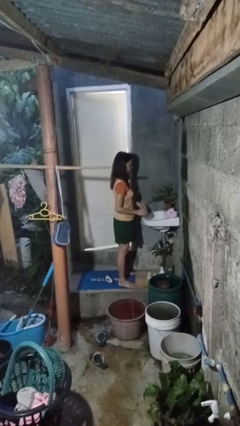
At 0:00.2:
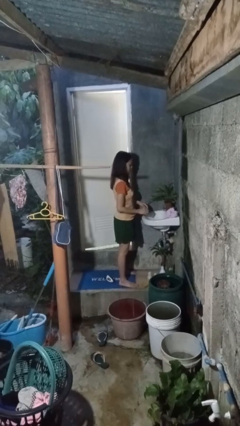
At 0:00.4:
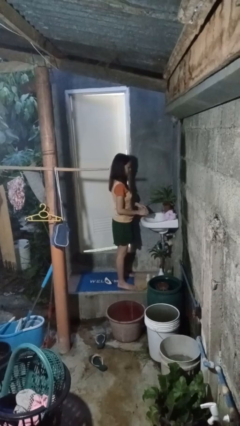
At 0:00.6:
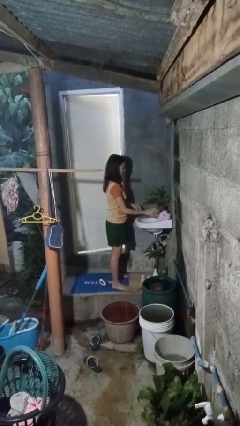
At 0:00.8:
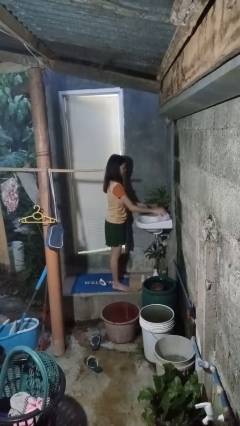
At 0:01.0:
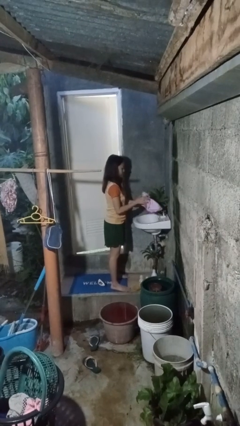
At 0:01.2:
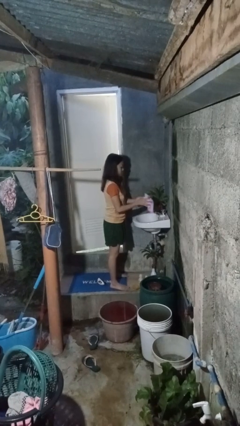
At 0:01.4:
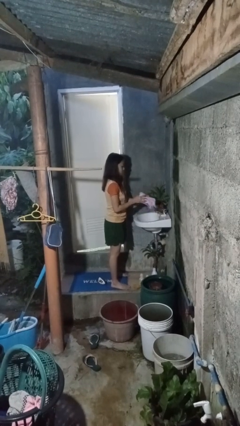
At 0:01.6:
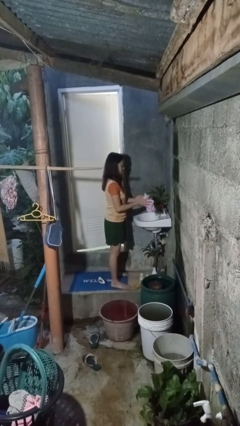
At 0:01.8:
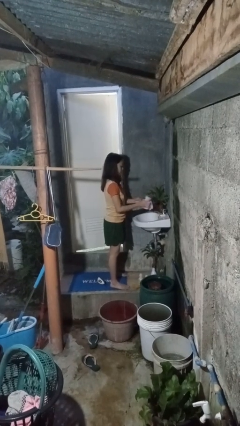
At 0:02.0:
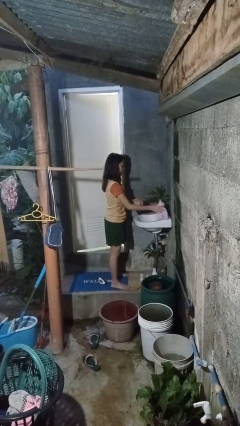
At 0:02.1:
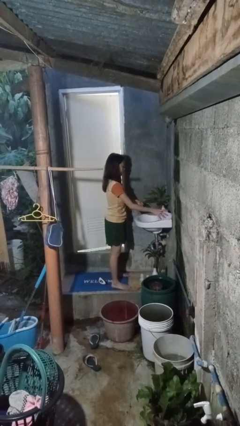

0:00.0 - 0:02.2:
person dries hands with towel

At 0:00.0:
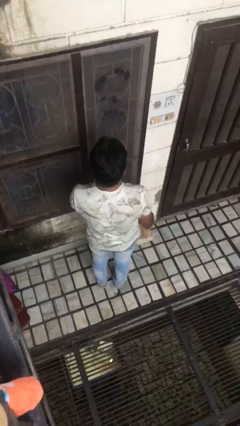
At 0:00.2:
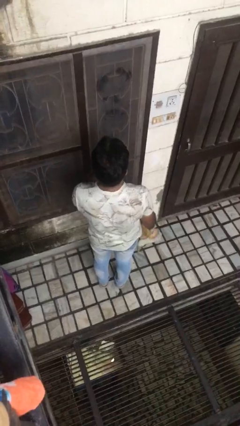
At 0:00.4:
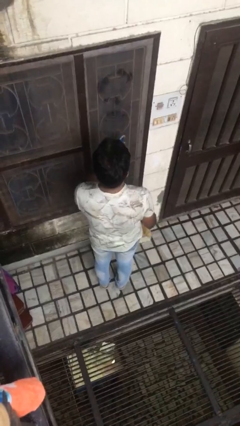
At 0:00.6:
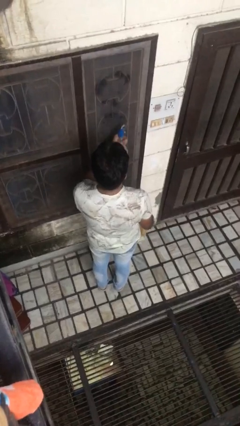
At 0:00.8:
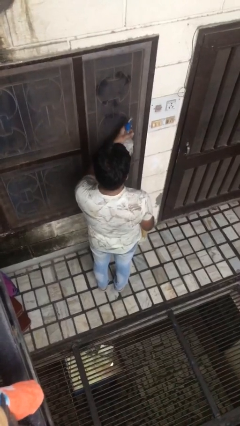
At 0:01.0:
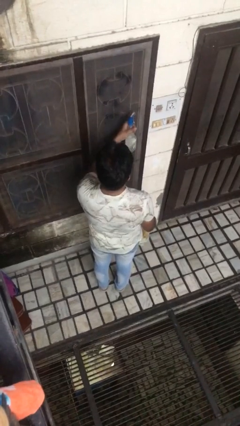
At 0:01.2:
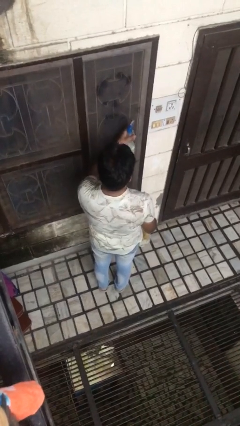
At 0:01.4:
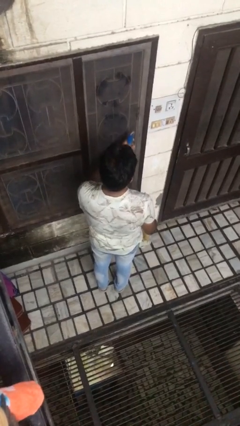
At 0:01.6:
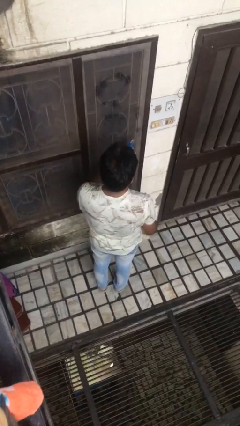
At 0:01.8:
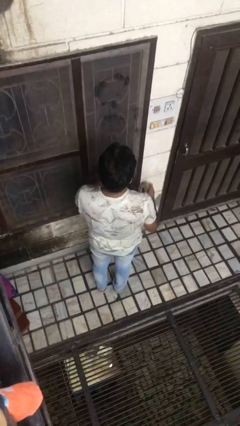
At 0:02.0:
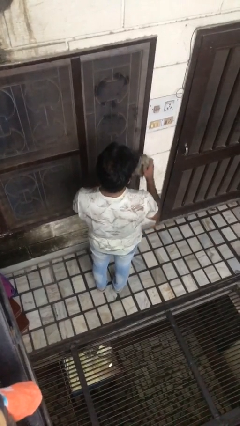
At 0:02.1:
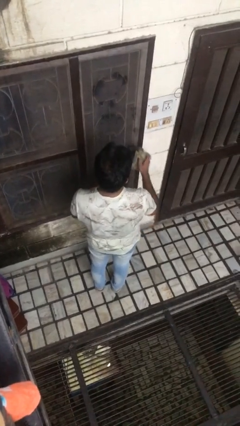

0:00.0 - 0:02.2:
person sprays from bottle

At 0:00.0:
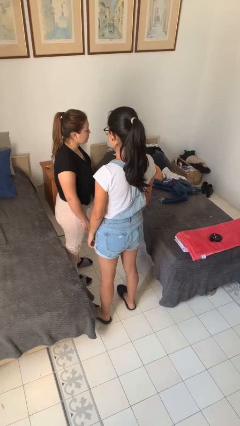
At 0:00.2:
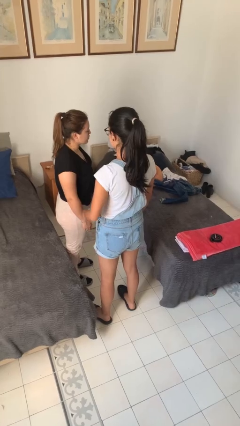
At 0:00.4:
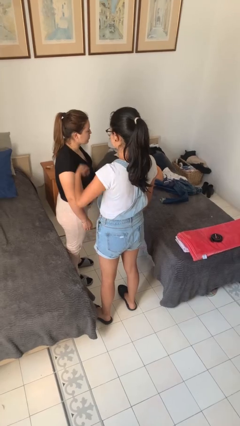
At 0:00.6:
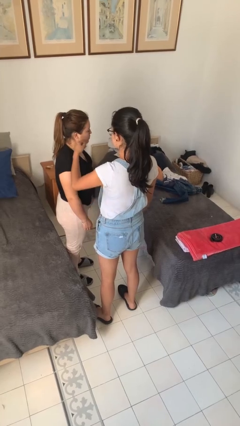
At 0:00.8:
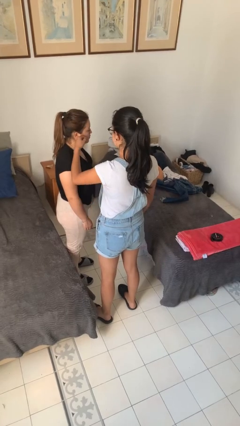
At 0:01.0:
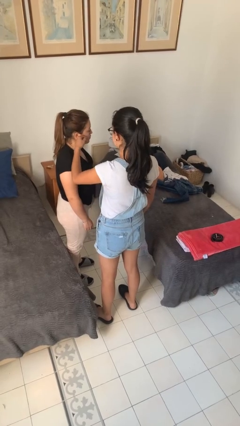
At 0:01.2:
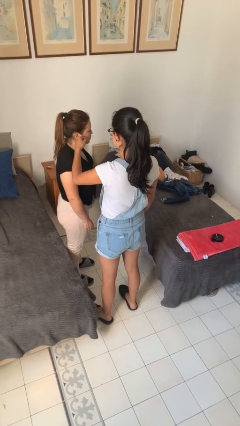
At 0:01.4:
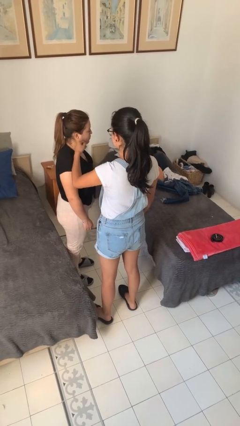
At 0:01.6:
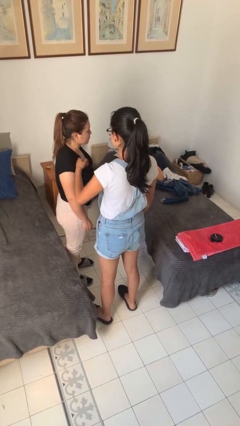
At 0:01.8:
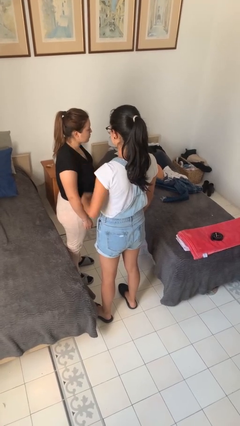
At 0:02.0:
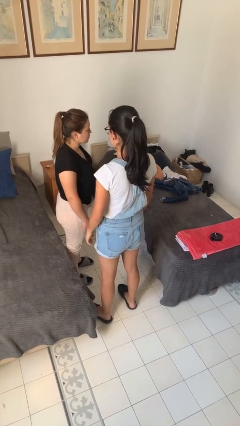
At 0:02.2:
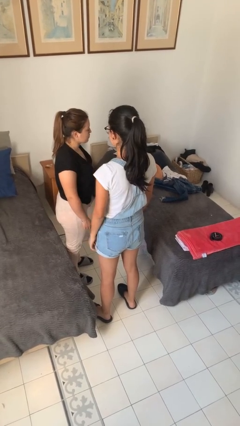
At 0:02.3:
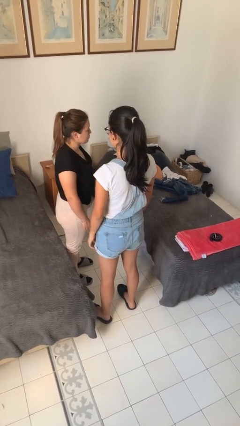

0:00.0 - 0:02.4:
person touches face of person

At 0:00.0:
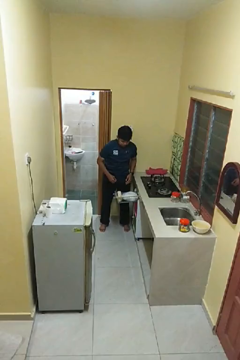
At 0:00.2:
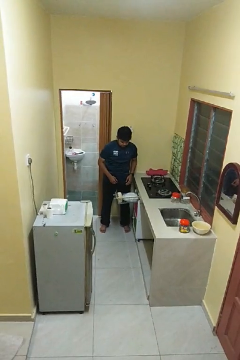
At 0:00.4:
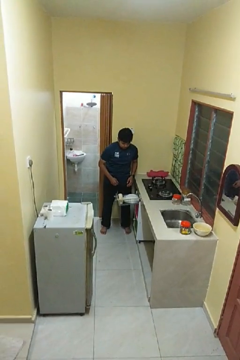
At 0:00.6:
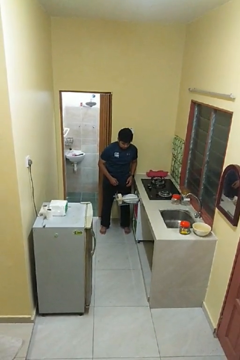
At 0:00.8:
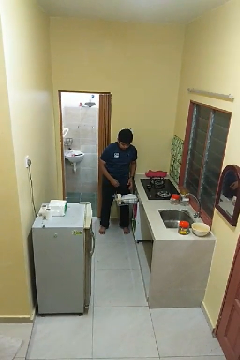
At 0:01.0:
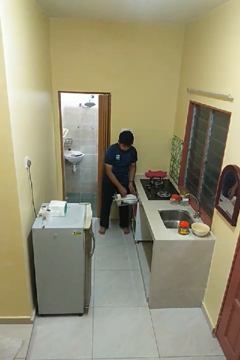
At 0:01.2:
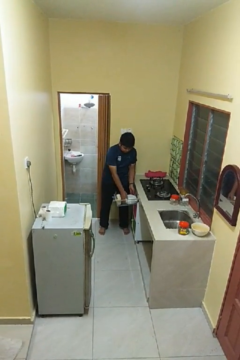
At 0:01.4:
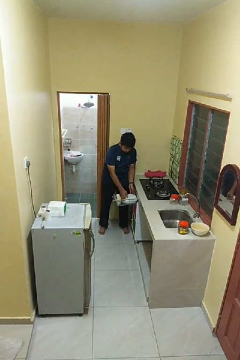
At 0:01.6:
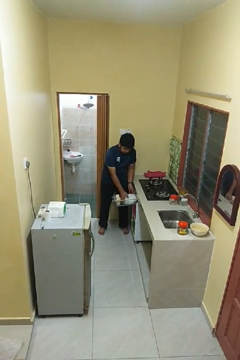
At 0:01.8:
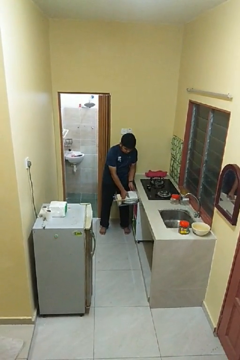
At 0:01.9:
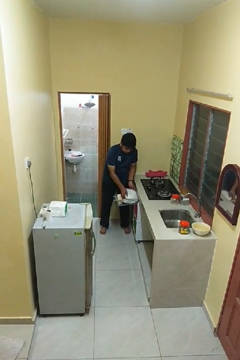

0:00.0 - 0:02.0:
person takes object from kitchen drawer

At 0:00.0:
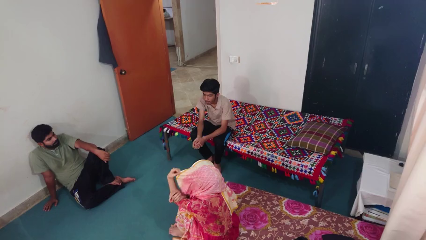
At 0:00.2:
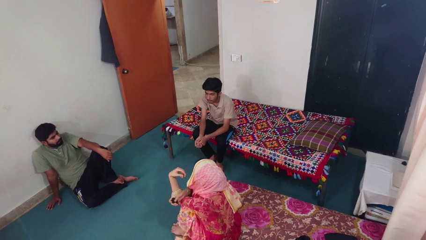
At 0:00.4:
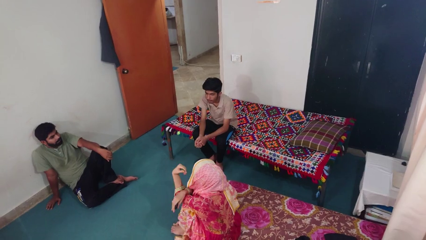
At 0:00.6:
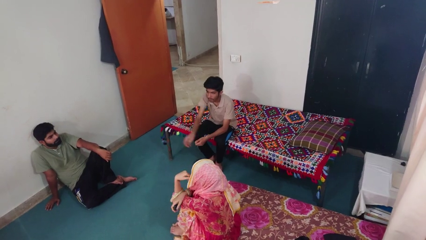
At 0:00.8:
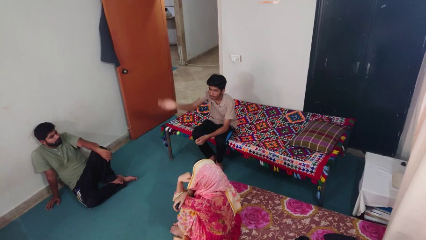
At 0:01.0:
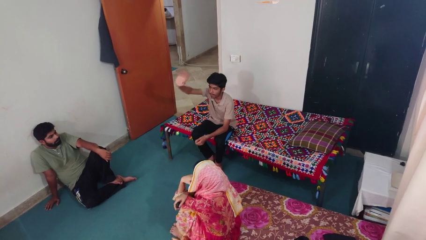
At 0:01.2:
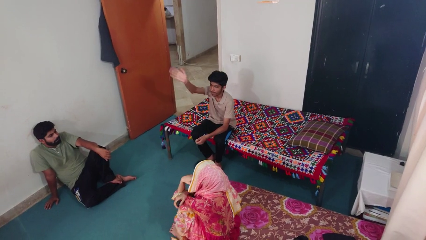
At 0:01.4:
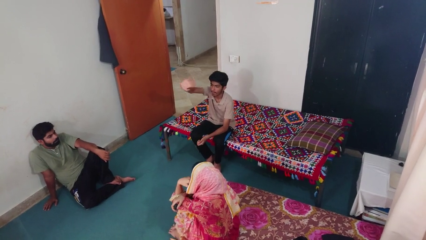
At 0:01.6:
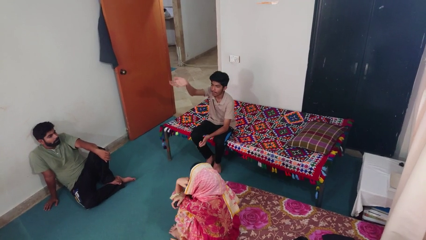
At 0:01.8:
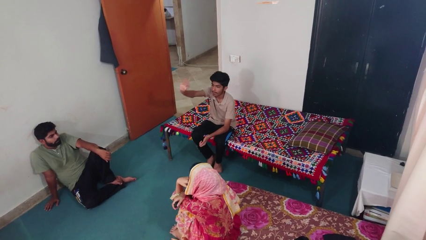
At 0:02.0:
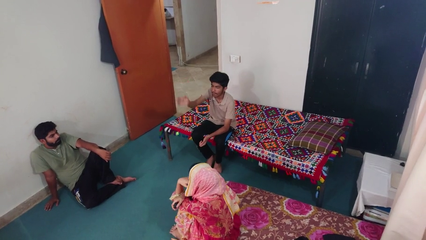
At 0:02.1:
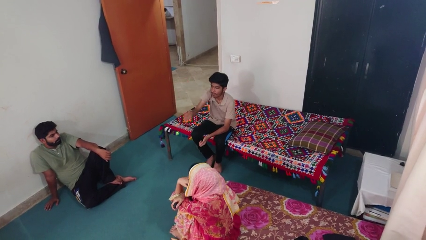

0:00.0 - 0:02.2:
person waves at person

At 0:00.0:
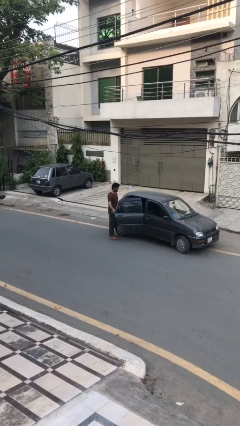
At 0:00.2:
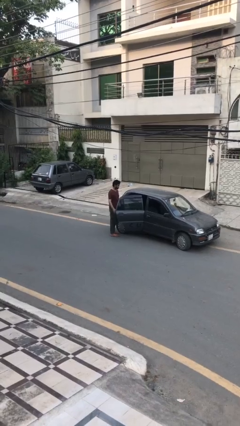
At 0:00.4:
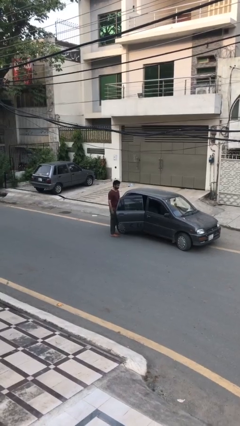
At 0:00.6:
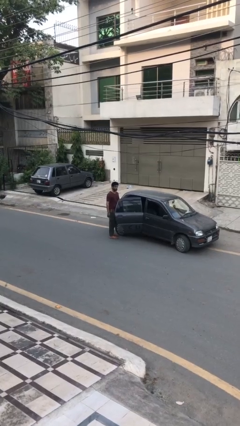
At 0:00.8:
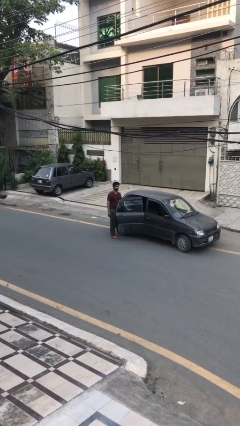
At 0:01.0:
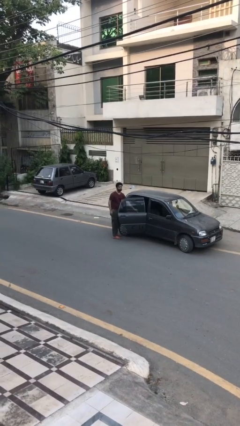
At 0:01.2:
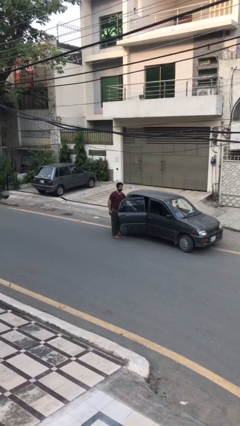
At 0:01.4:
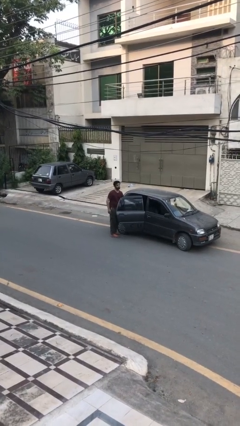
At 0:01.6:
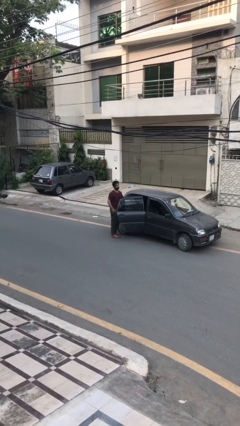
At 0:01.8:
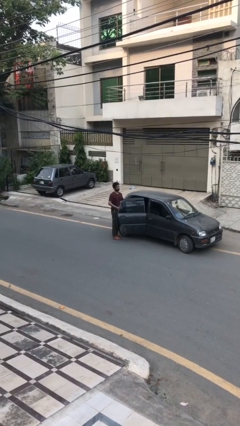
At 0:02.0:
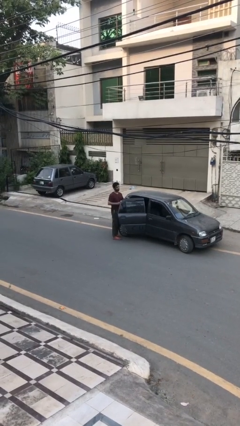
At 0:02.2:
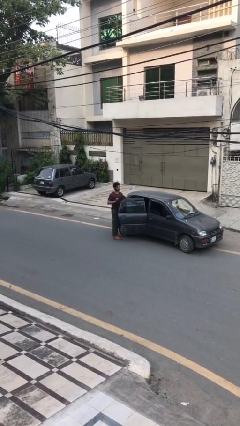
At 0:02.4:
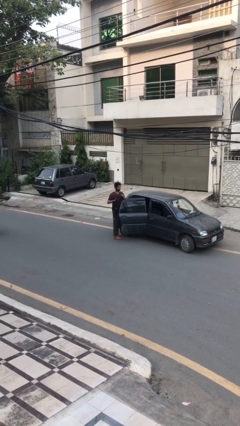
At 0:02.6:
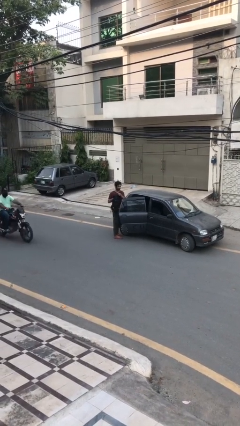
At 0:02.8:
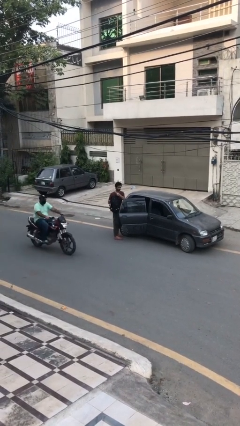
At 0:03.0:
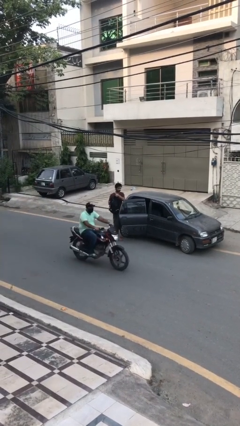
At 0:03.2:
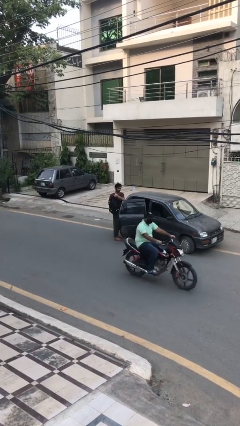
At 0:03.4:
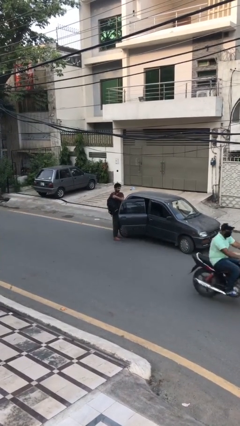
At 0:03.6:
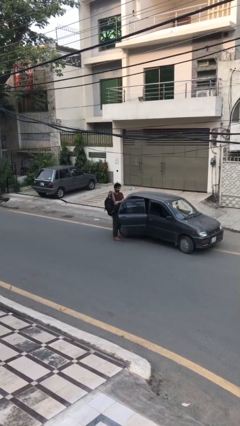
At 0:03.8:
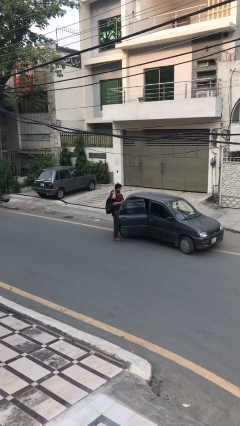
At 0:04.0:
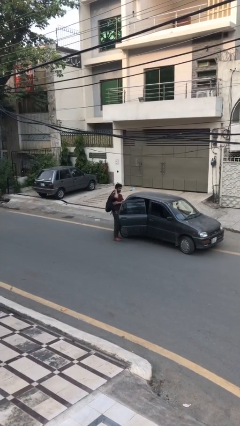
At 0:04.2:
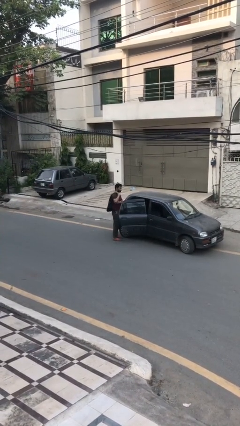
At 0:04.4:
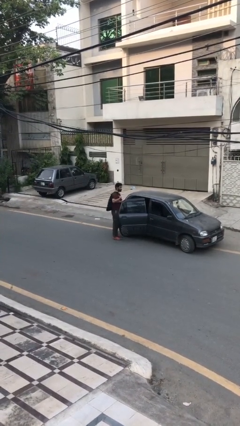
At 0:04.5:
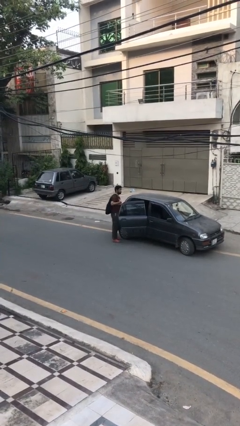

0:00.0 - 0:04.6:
person unloads car

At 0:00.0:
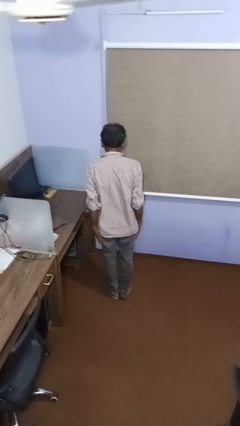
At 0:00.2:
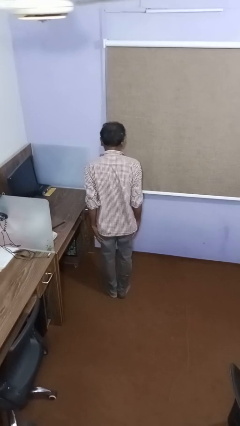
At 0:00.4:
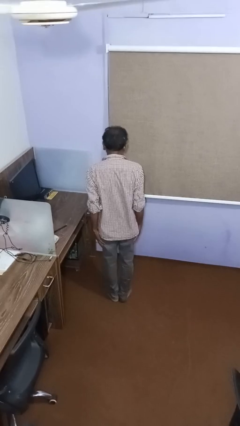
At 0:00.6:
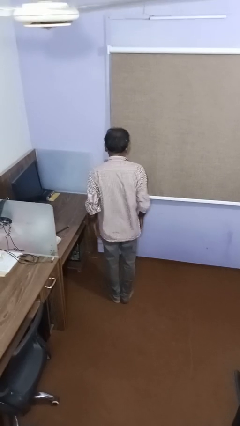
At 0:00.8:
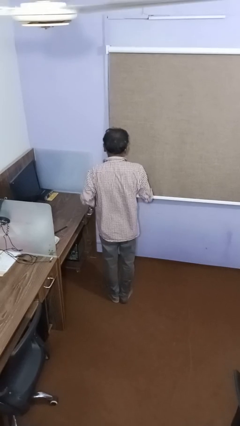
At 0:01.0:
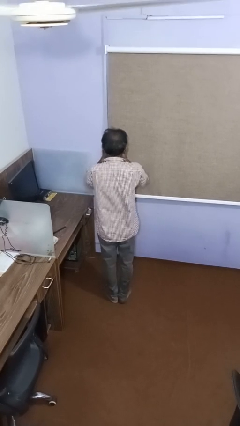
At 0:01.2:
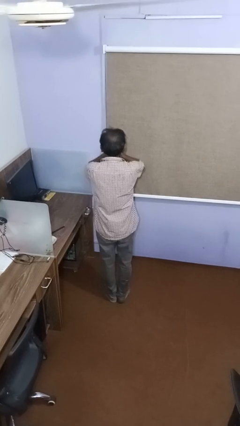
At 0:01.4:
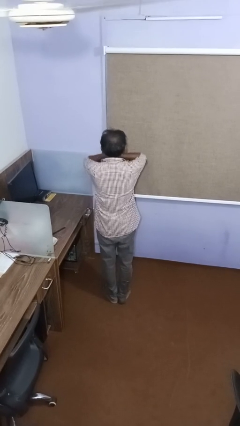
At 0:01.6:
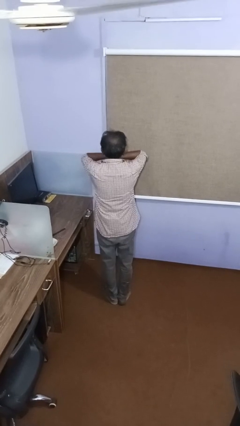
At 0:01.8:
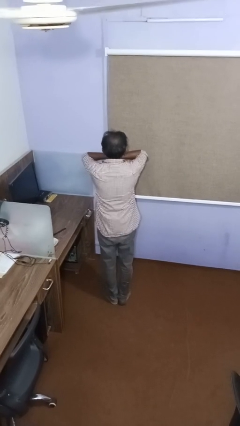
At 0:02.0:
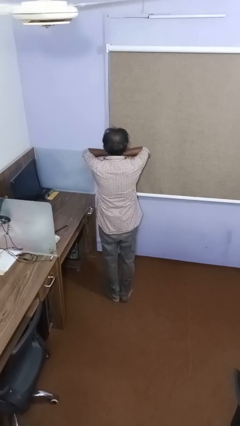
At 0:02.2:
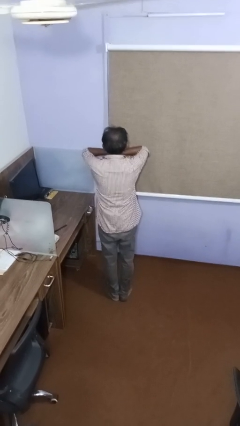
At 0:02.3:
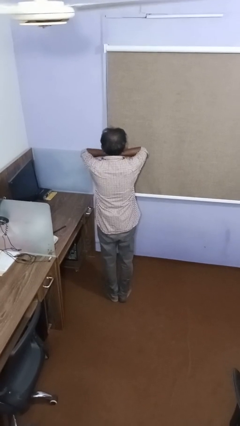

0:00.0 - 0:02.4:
person covers face with hands
